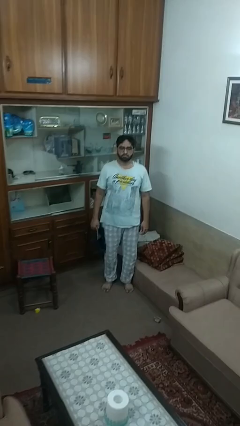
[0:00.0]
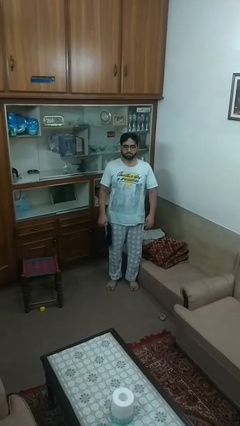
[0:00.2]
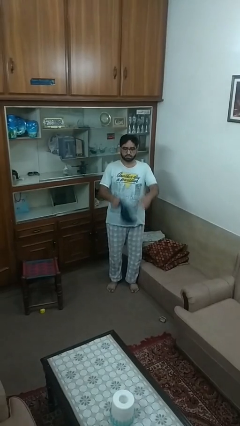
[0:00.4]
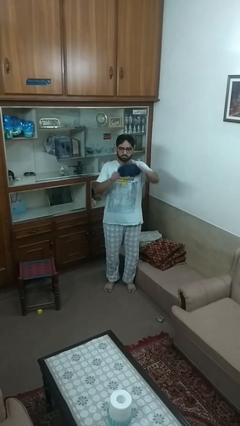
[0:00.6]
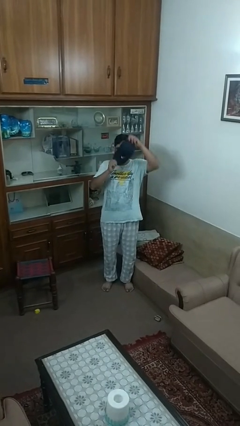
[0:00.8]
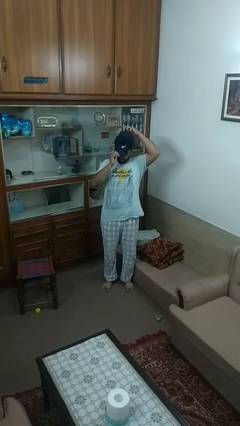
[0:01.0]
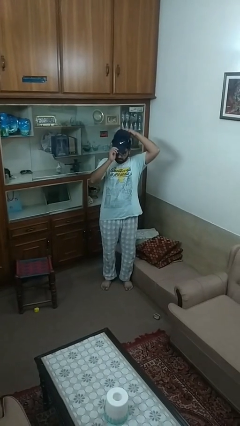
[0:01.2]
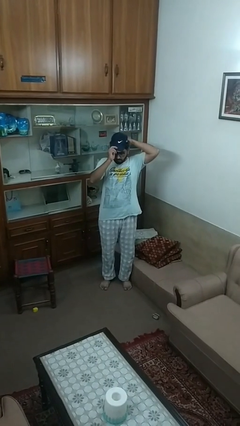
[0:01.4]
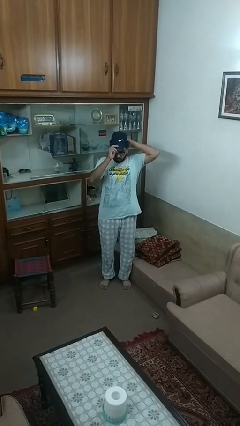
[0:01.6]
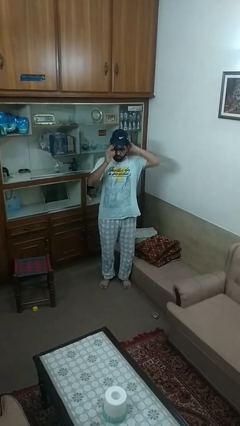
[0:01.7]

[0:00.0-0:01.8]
person puts on hat

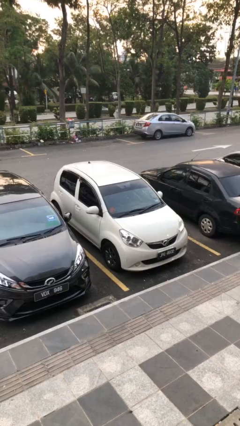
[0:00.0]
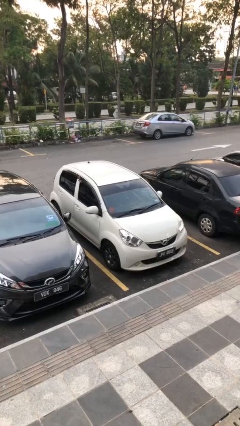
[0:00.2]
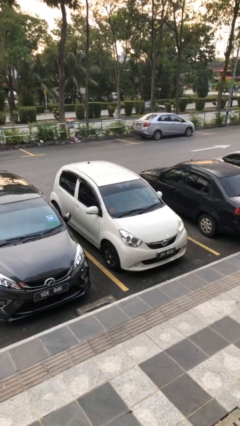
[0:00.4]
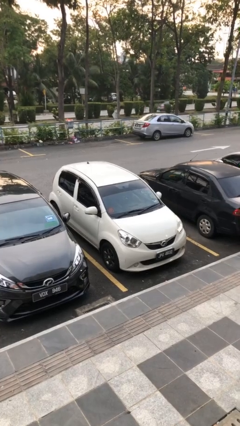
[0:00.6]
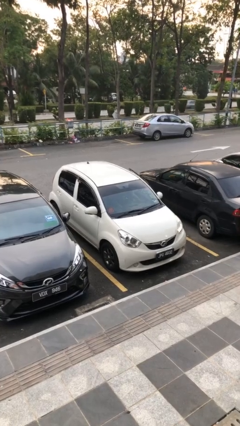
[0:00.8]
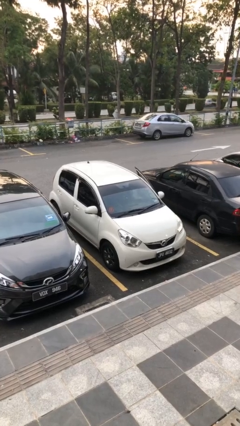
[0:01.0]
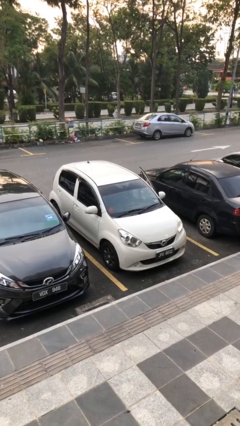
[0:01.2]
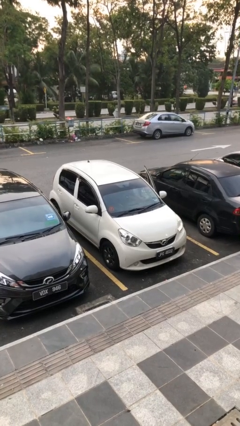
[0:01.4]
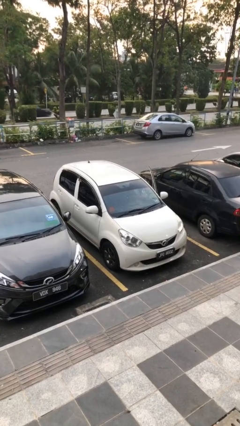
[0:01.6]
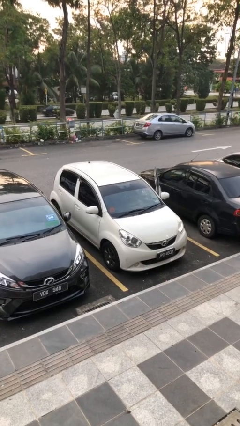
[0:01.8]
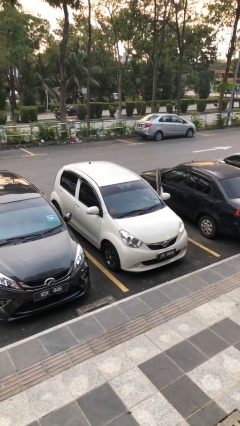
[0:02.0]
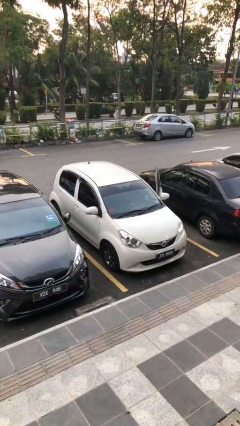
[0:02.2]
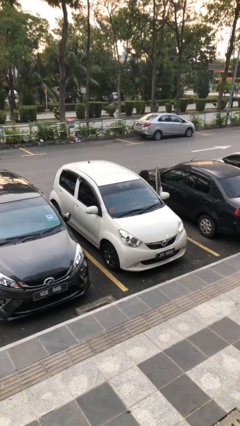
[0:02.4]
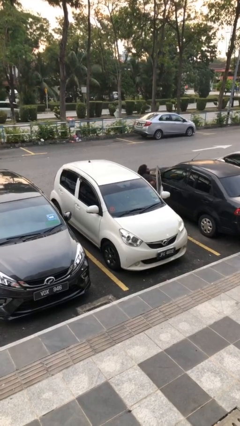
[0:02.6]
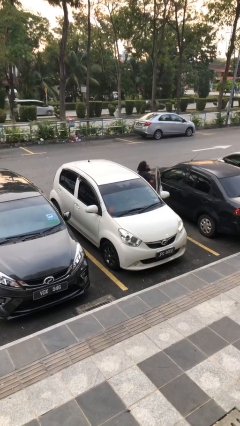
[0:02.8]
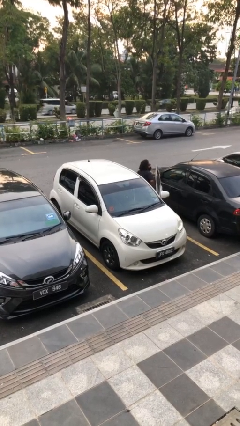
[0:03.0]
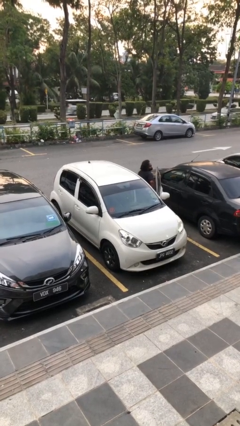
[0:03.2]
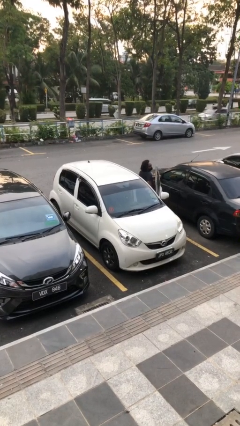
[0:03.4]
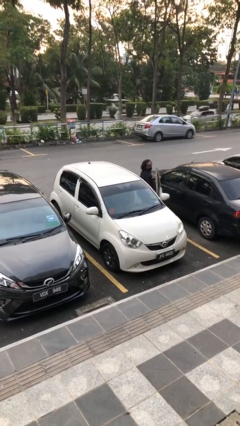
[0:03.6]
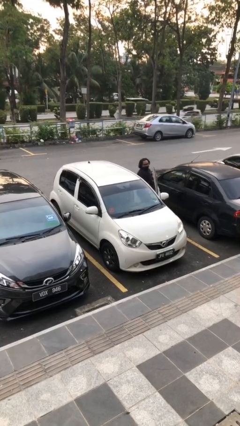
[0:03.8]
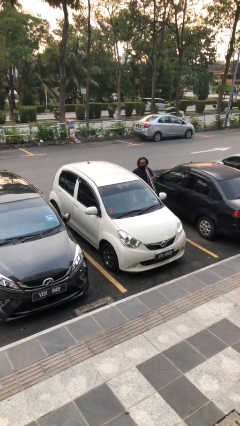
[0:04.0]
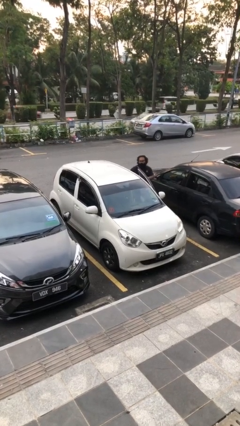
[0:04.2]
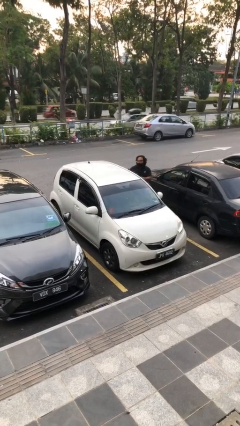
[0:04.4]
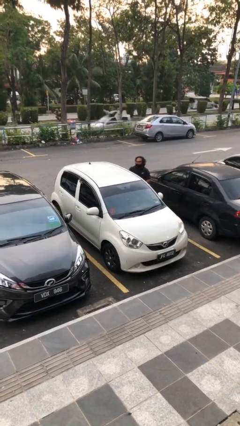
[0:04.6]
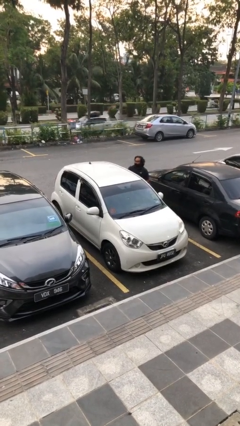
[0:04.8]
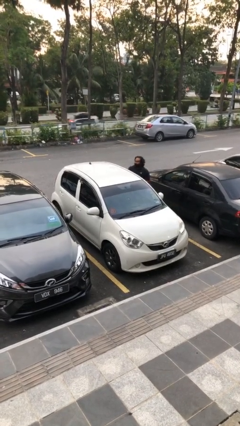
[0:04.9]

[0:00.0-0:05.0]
car drops off person

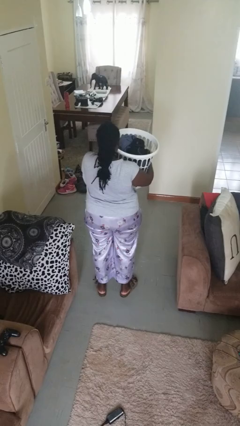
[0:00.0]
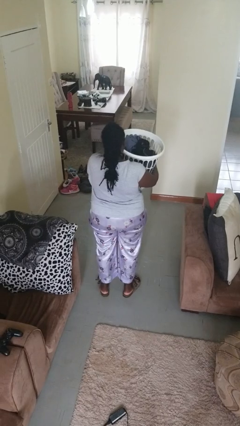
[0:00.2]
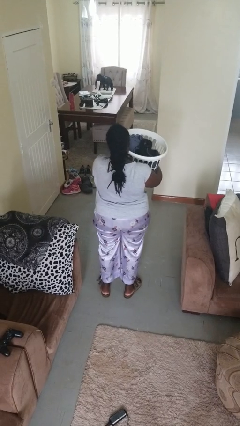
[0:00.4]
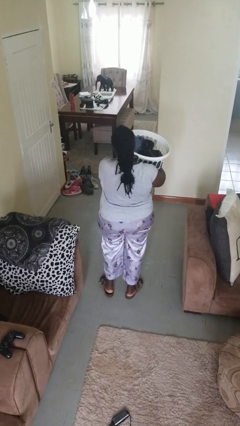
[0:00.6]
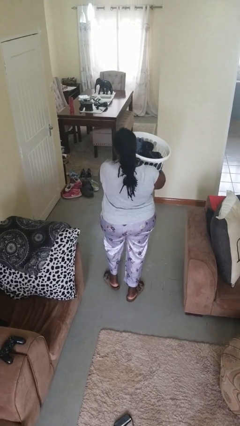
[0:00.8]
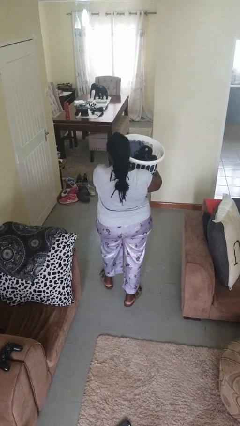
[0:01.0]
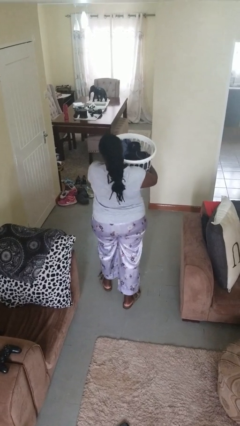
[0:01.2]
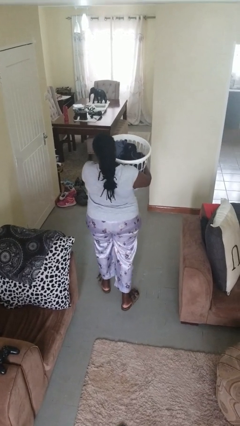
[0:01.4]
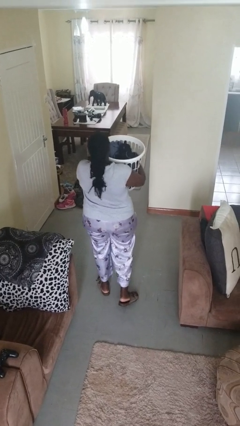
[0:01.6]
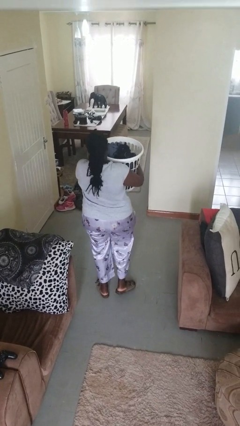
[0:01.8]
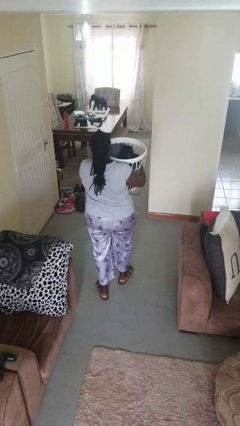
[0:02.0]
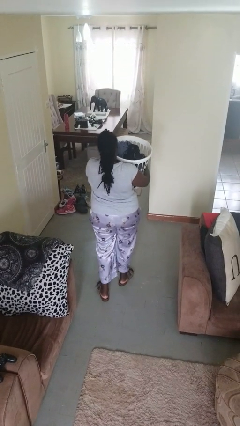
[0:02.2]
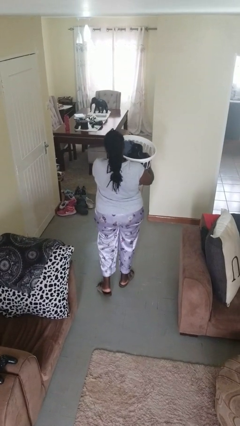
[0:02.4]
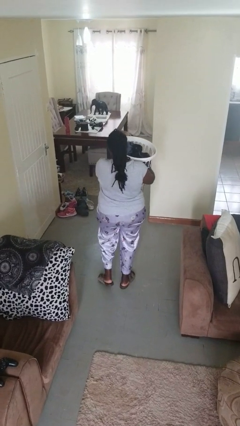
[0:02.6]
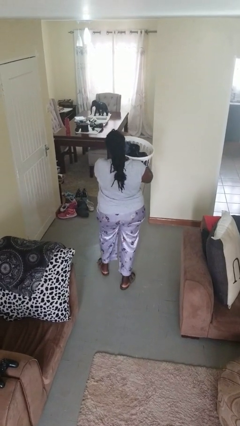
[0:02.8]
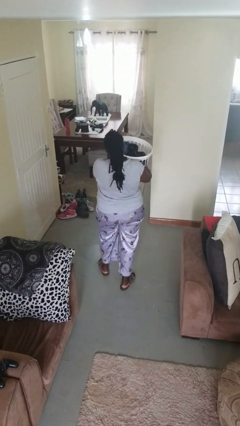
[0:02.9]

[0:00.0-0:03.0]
person carries laundry basket

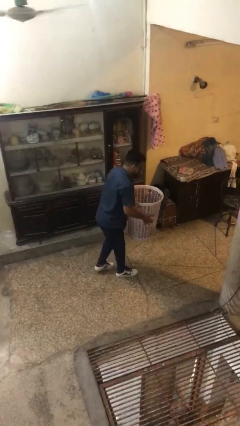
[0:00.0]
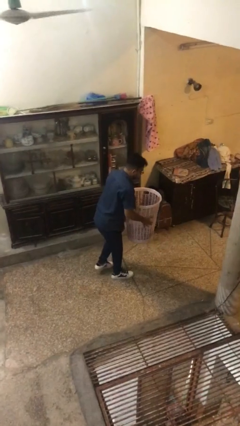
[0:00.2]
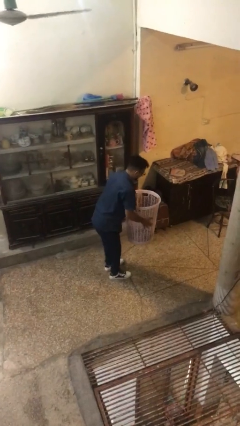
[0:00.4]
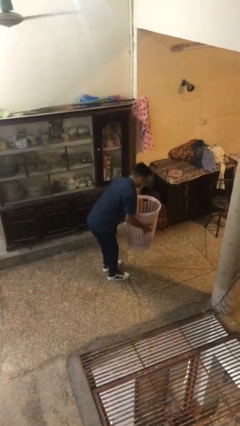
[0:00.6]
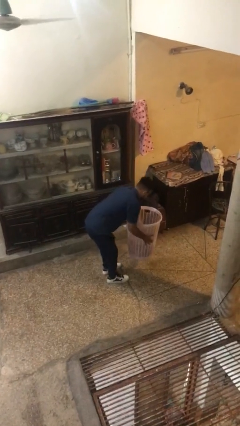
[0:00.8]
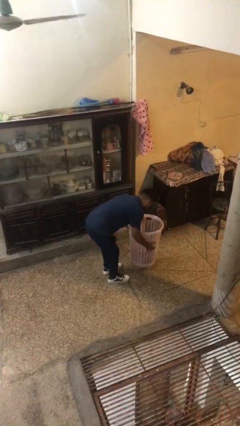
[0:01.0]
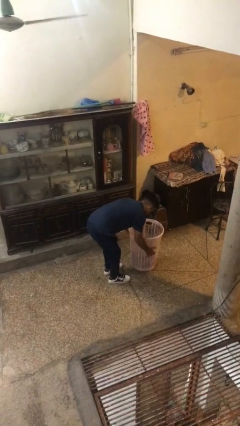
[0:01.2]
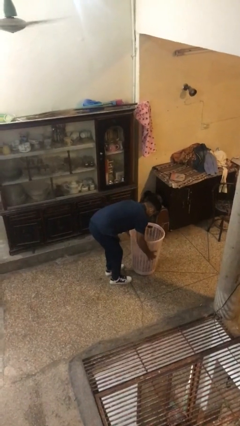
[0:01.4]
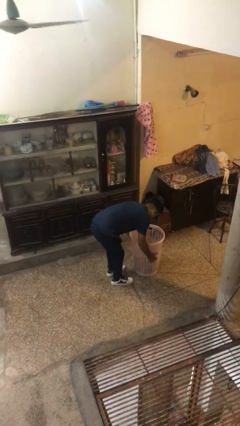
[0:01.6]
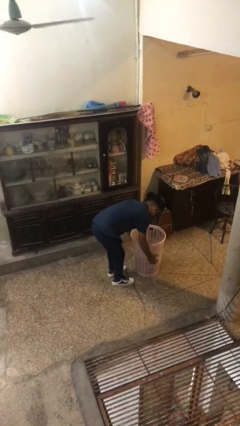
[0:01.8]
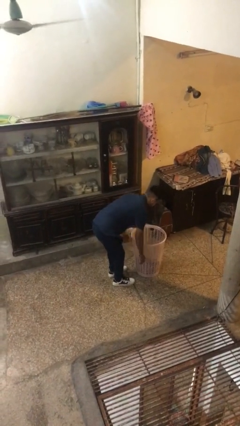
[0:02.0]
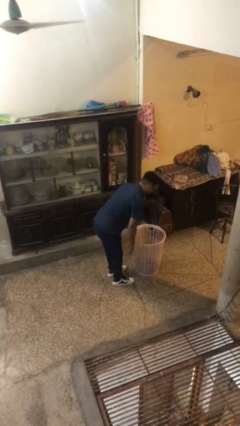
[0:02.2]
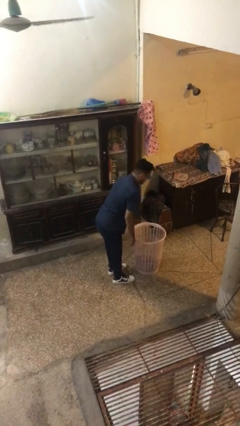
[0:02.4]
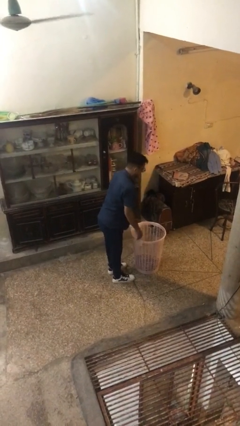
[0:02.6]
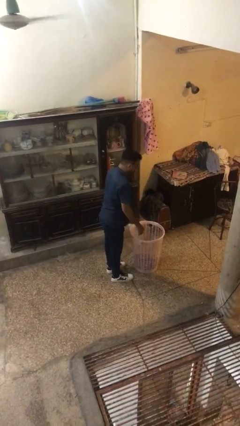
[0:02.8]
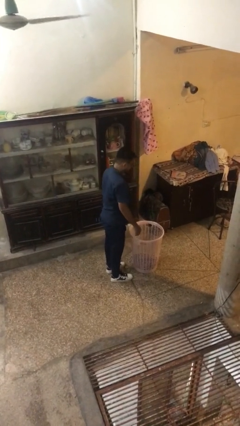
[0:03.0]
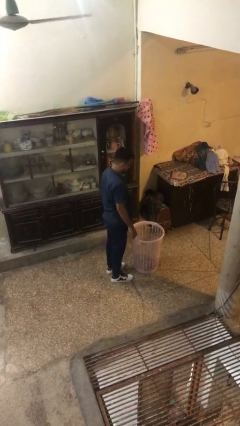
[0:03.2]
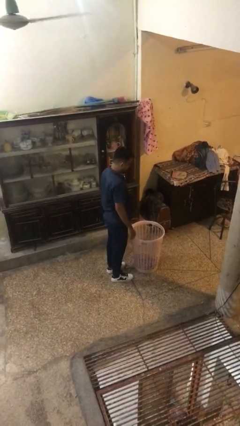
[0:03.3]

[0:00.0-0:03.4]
person puts down object on floor

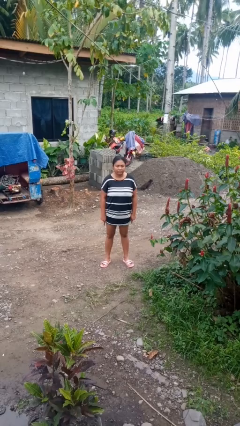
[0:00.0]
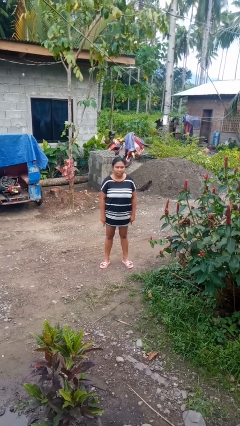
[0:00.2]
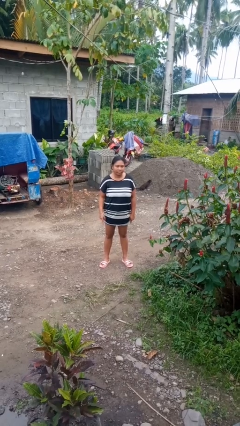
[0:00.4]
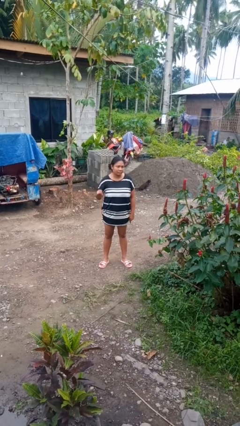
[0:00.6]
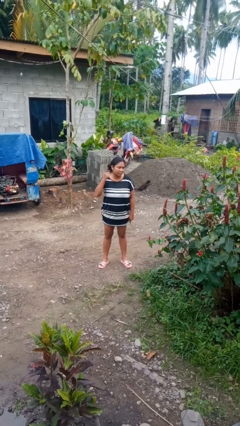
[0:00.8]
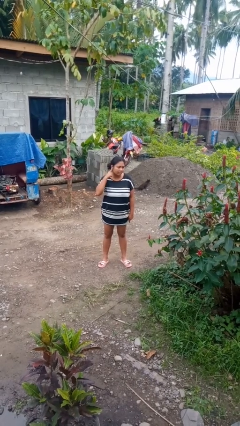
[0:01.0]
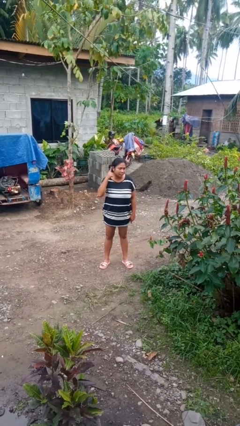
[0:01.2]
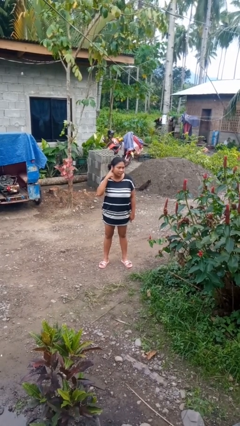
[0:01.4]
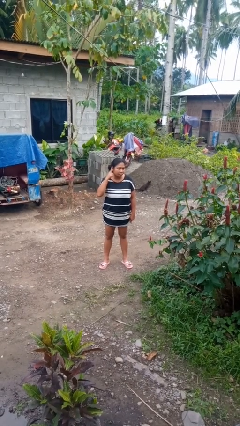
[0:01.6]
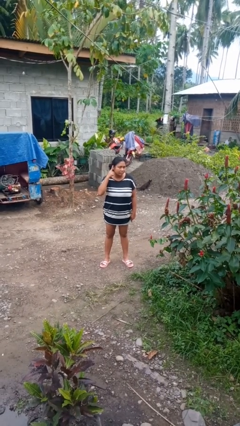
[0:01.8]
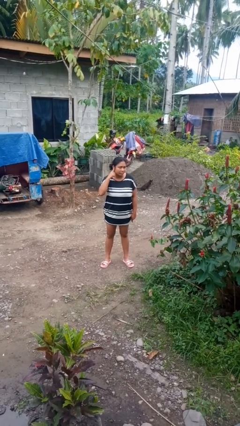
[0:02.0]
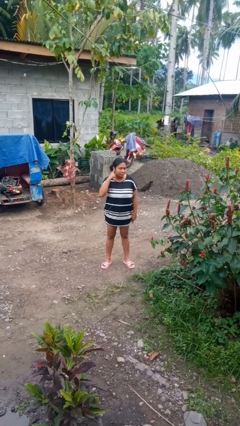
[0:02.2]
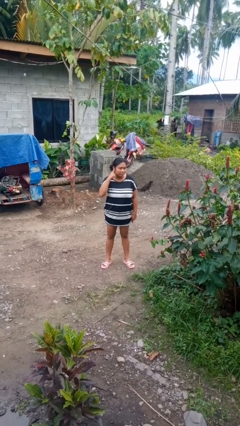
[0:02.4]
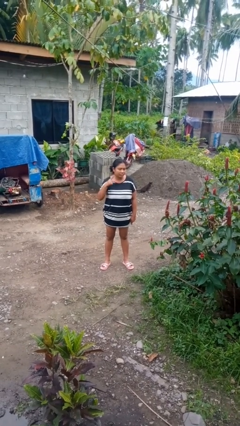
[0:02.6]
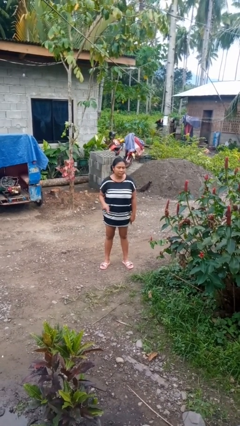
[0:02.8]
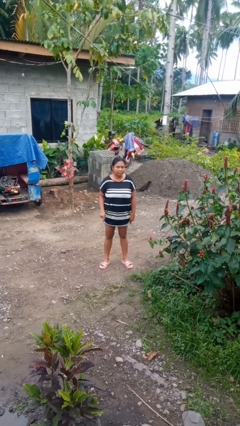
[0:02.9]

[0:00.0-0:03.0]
person gestures listen closely

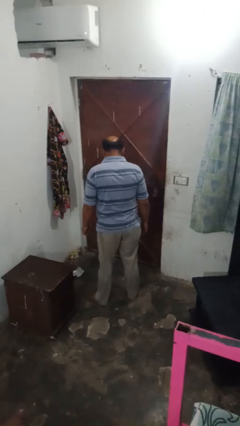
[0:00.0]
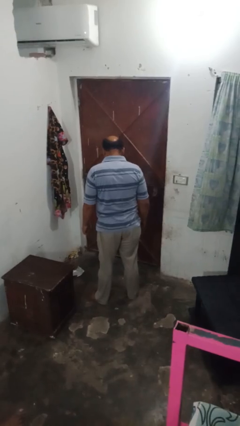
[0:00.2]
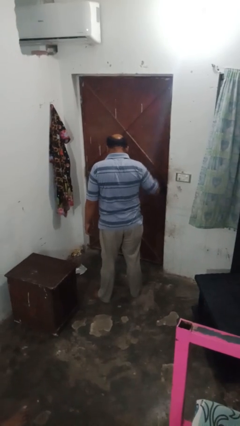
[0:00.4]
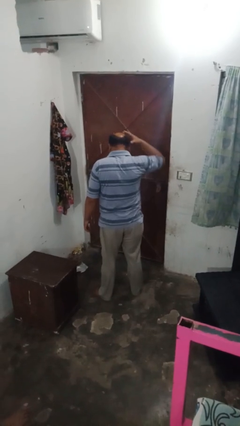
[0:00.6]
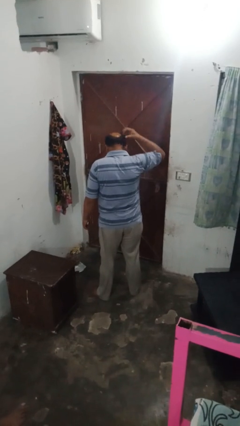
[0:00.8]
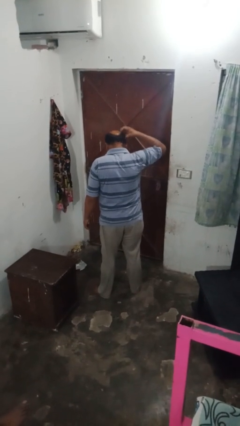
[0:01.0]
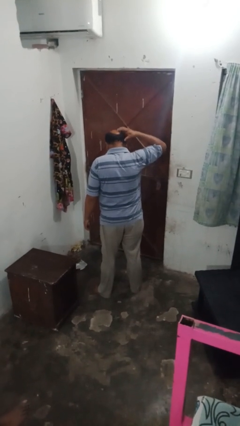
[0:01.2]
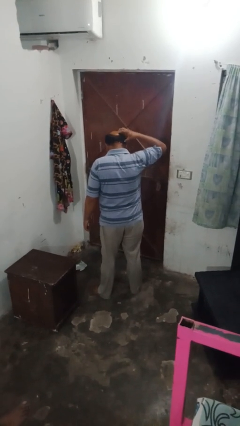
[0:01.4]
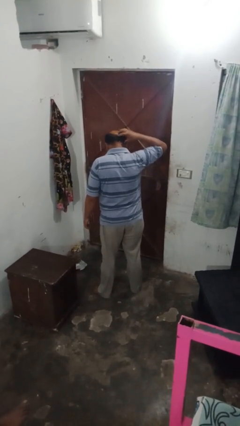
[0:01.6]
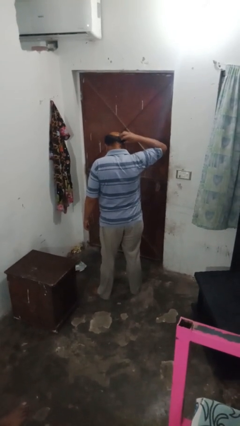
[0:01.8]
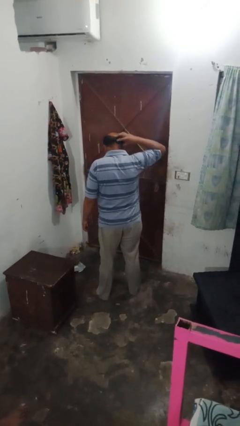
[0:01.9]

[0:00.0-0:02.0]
person strokes hair
